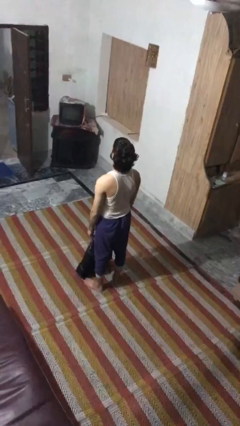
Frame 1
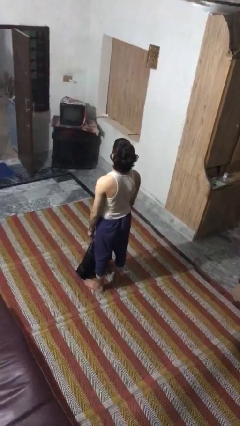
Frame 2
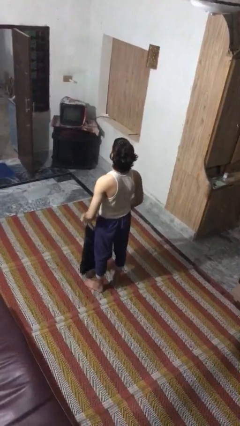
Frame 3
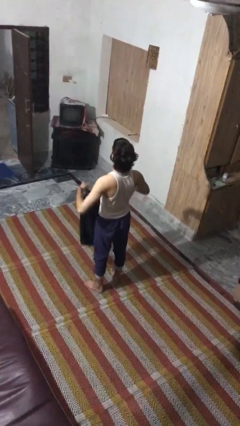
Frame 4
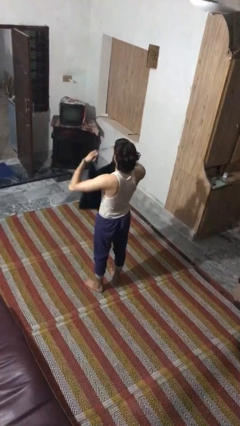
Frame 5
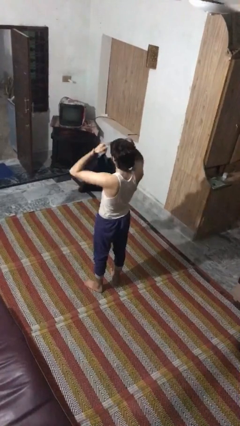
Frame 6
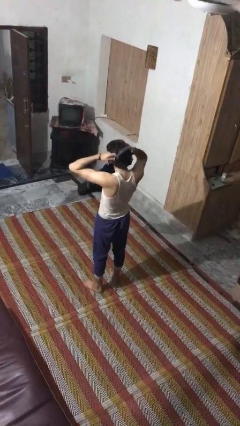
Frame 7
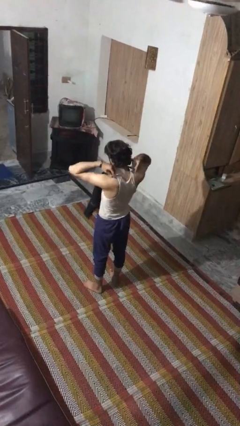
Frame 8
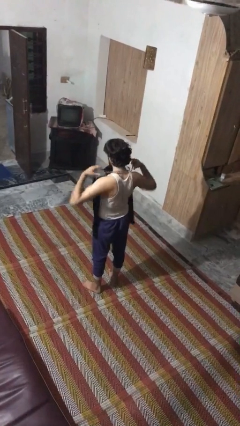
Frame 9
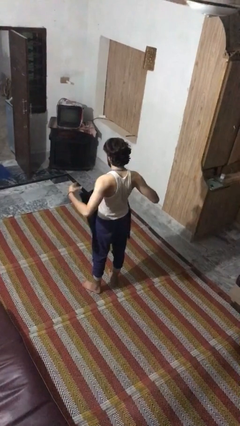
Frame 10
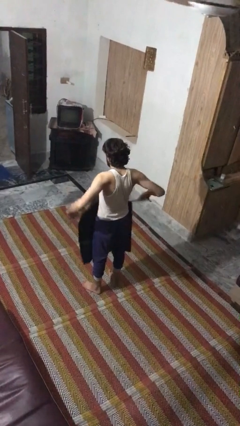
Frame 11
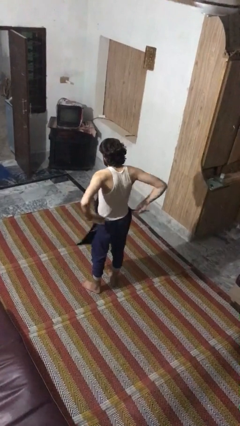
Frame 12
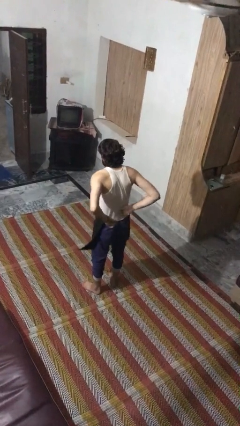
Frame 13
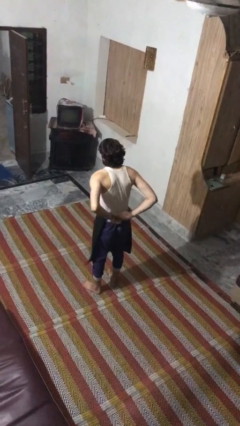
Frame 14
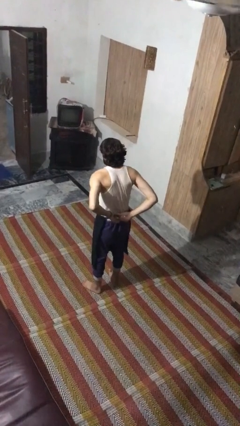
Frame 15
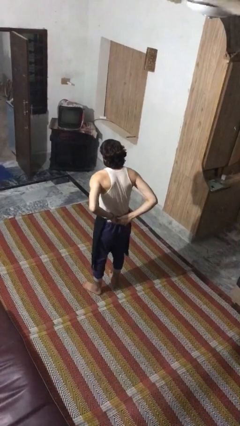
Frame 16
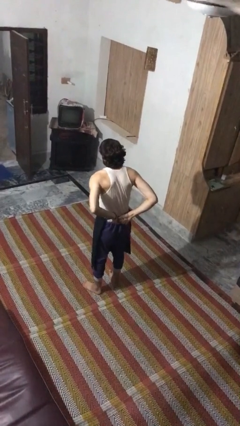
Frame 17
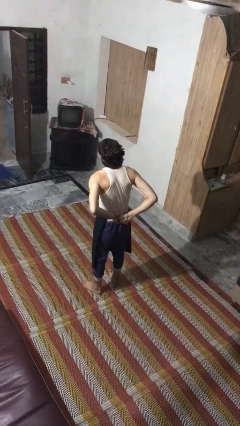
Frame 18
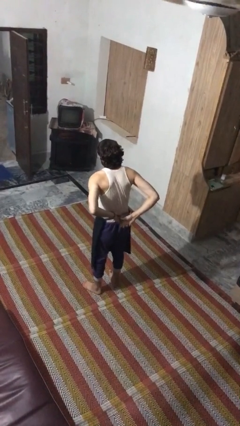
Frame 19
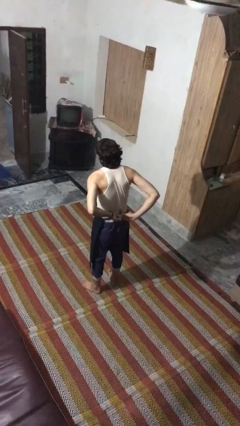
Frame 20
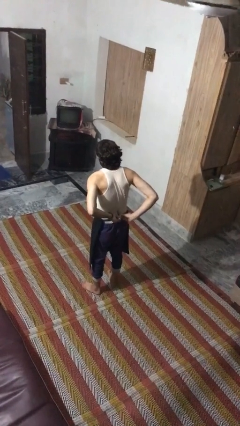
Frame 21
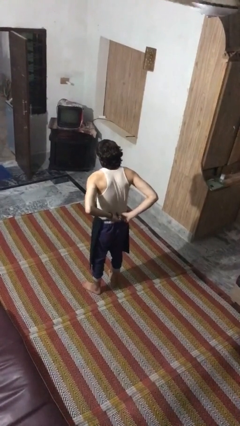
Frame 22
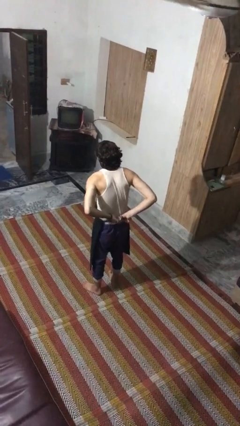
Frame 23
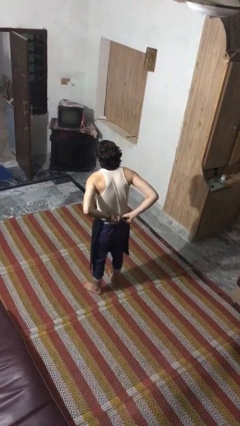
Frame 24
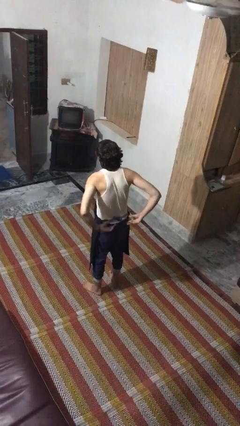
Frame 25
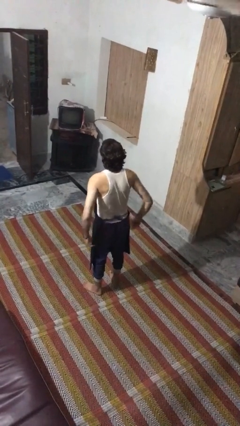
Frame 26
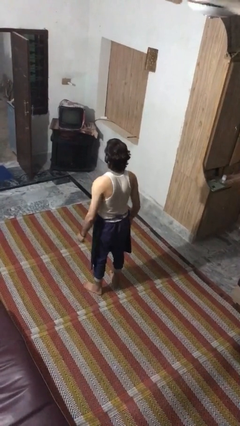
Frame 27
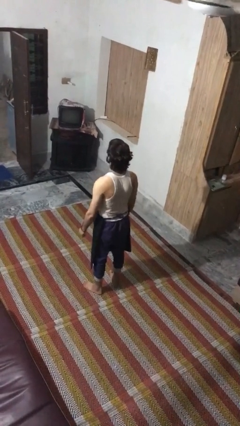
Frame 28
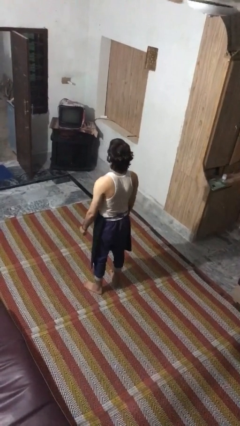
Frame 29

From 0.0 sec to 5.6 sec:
person puts on apron

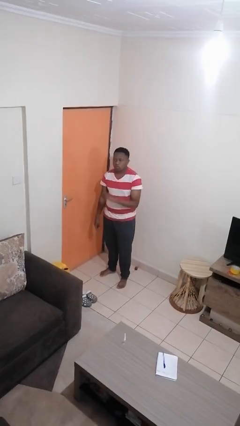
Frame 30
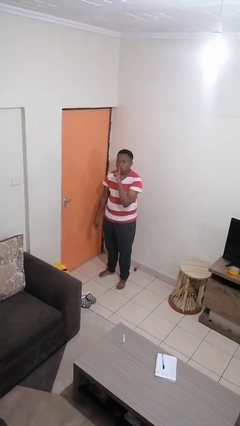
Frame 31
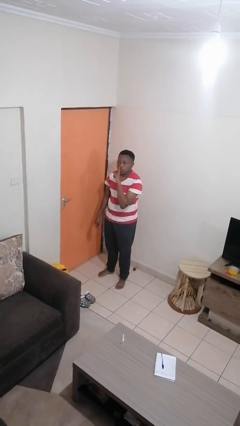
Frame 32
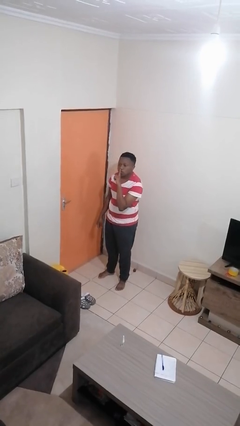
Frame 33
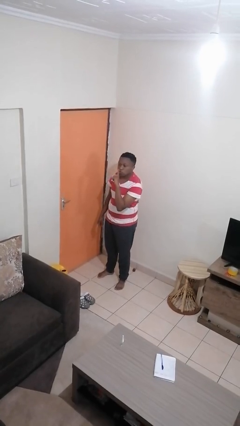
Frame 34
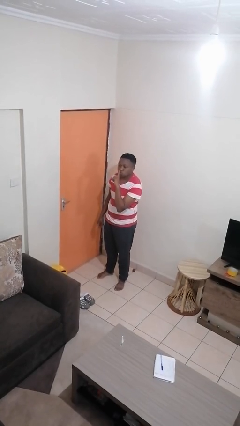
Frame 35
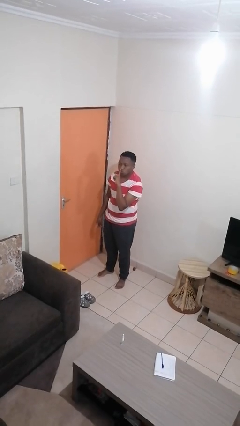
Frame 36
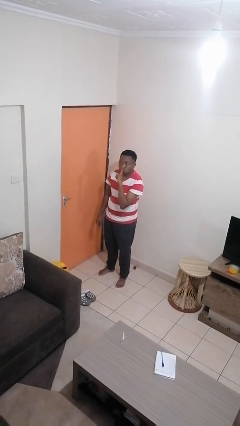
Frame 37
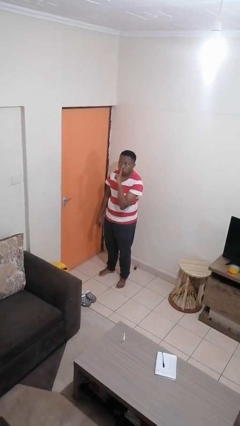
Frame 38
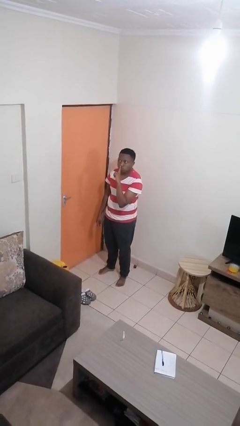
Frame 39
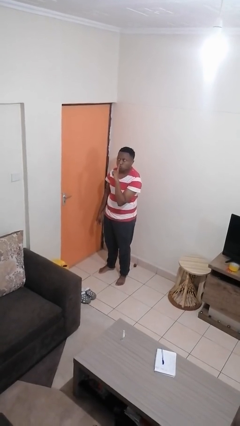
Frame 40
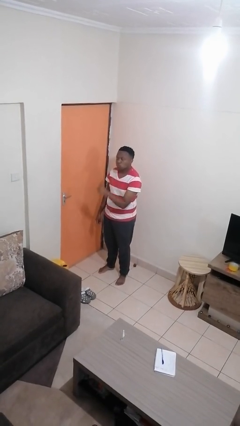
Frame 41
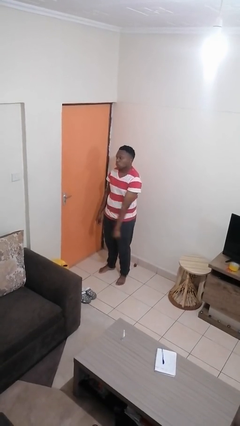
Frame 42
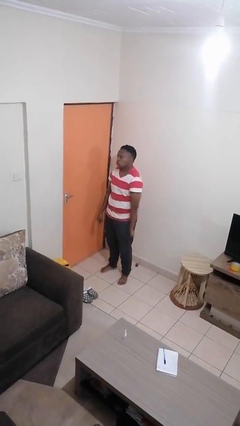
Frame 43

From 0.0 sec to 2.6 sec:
person gestures be quiet

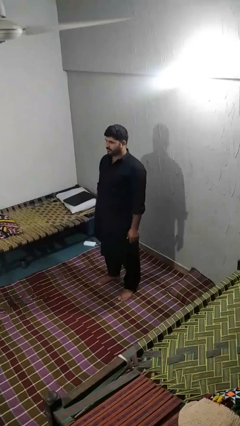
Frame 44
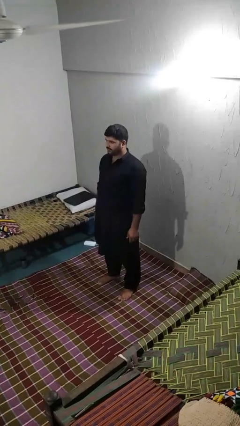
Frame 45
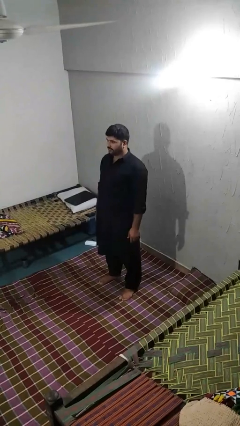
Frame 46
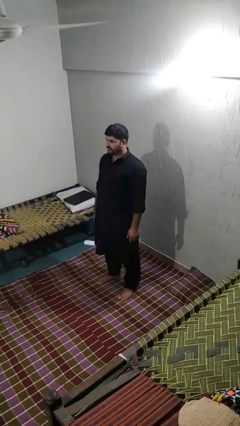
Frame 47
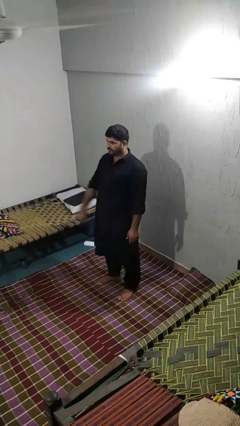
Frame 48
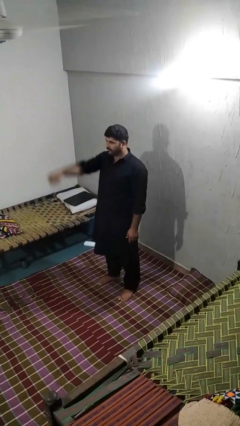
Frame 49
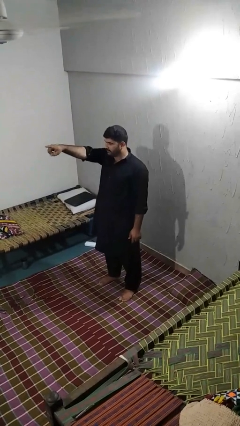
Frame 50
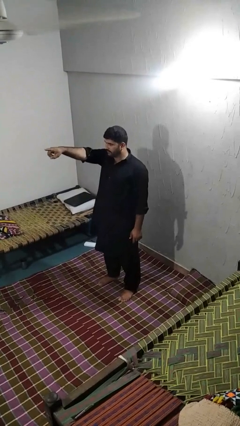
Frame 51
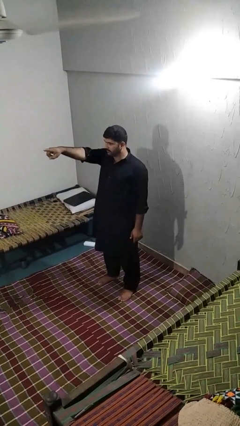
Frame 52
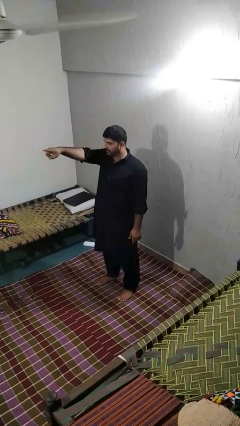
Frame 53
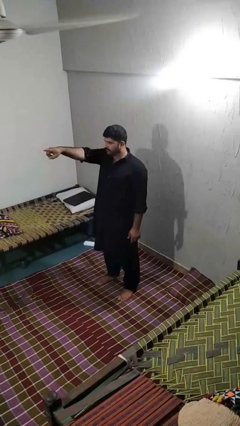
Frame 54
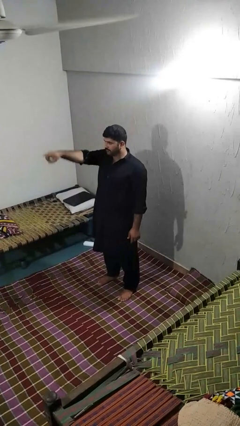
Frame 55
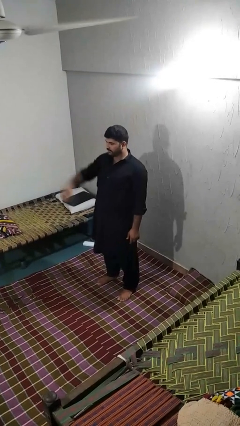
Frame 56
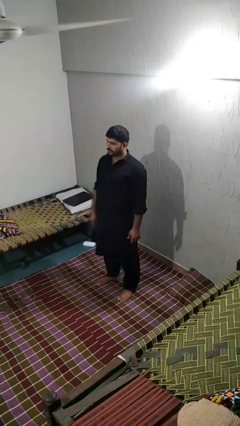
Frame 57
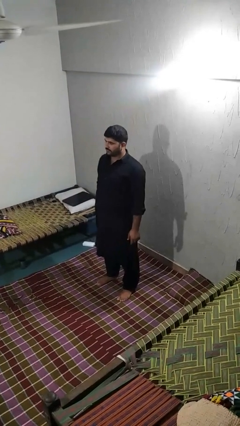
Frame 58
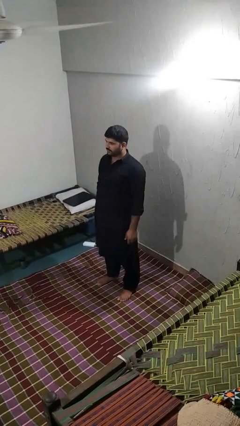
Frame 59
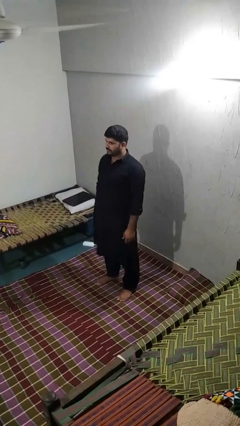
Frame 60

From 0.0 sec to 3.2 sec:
person points at person

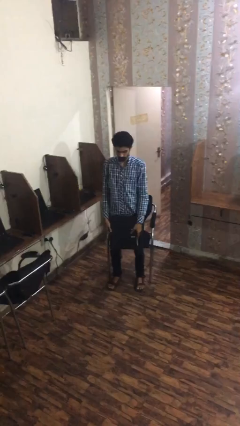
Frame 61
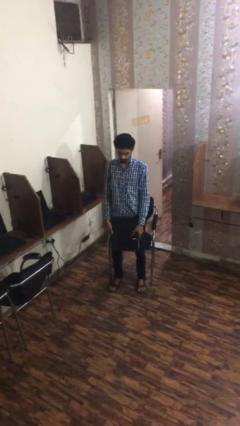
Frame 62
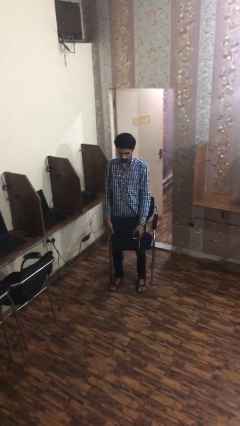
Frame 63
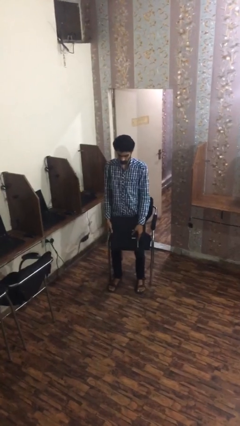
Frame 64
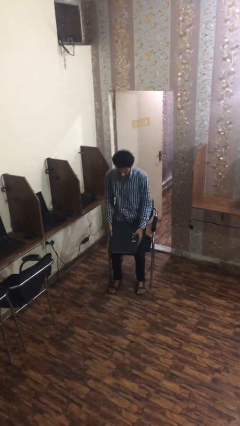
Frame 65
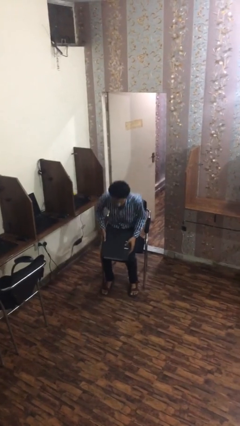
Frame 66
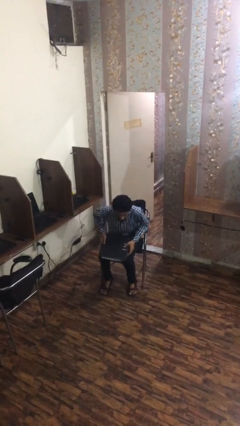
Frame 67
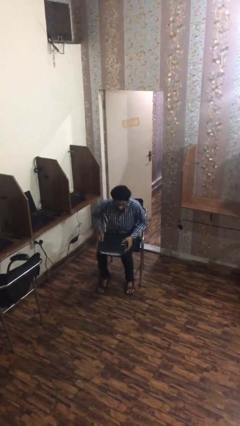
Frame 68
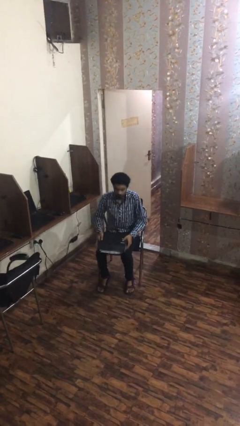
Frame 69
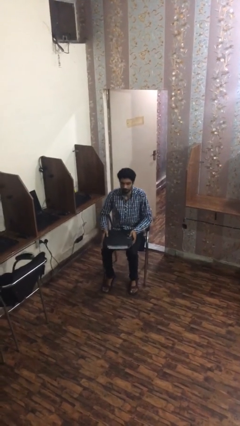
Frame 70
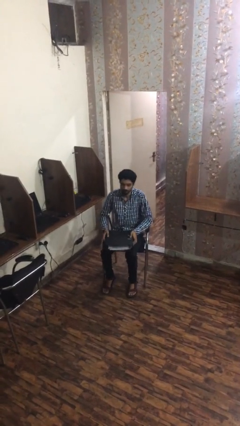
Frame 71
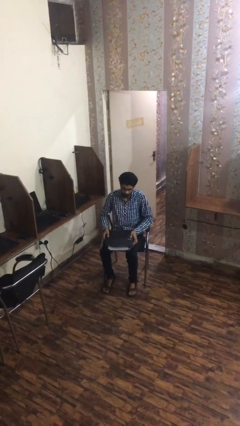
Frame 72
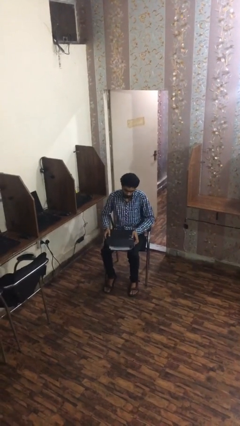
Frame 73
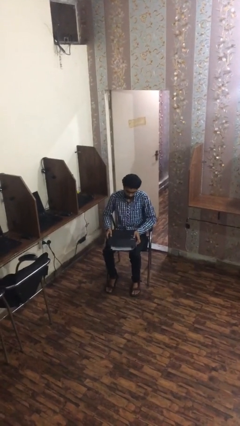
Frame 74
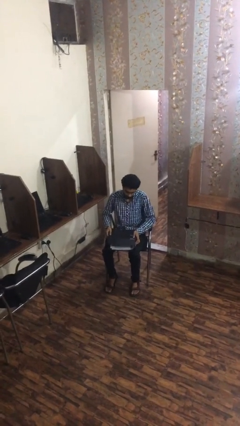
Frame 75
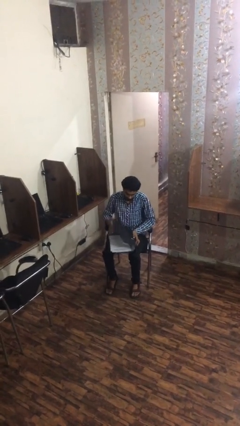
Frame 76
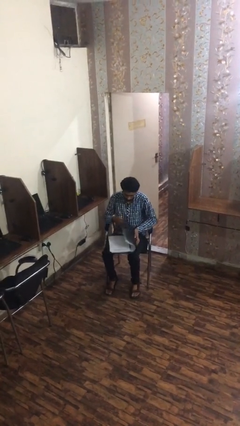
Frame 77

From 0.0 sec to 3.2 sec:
person sits down

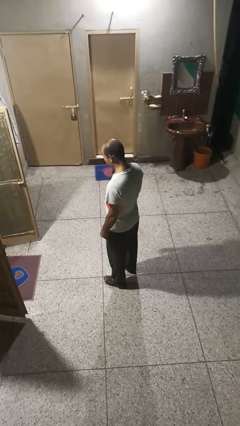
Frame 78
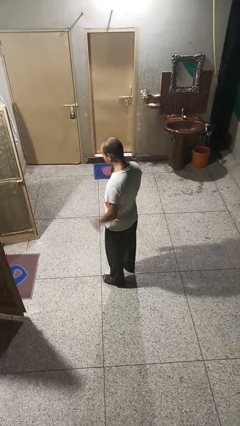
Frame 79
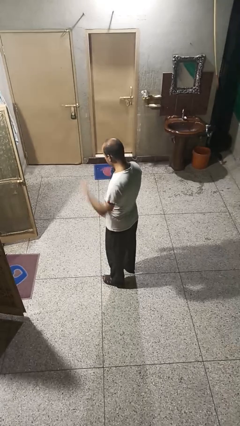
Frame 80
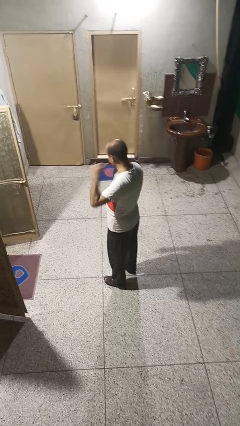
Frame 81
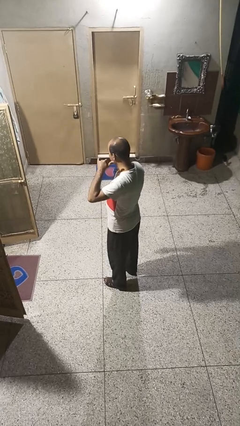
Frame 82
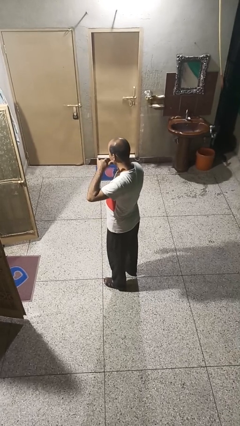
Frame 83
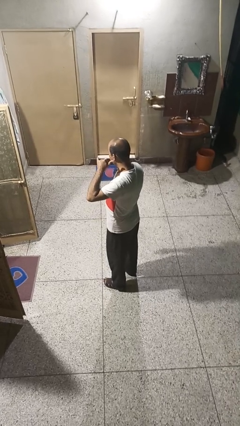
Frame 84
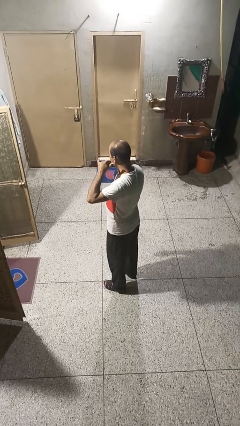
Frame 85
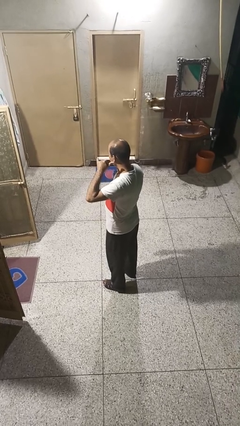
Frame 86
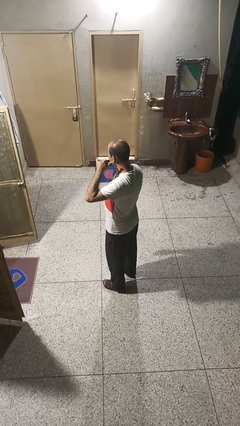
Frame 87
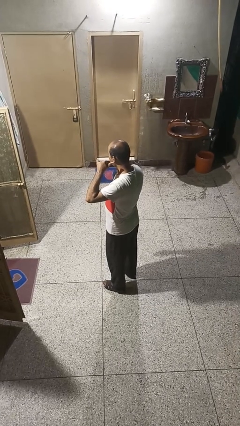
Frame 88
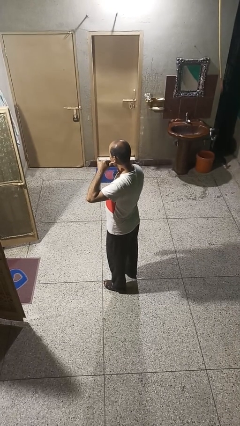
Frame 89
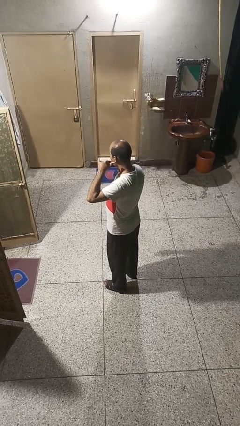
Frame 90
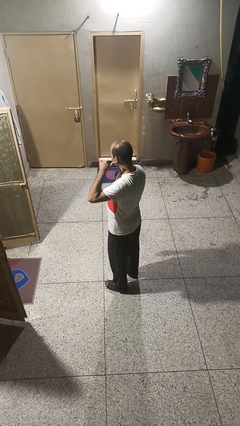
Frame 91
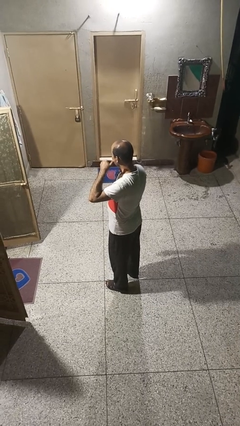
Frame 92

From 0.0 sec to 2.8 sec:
person gestures call me
